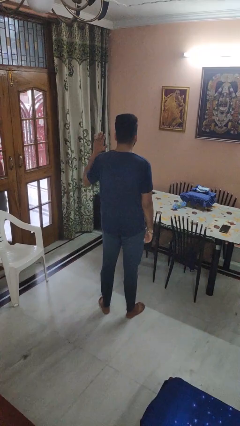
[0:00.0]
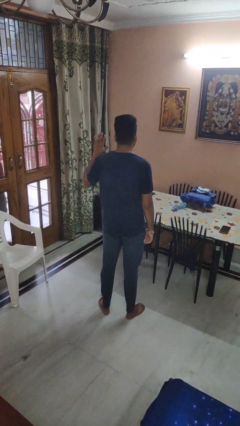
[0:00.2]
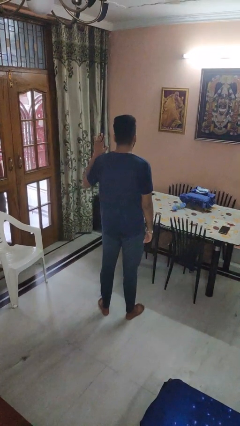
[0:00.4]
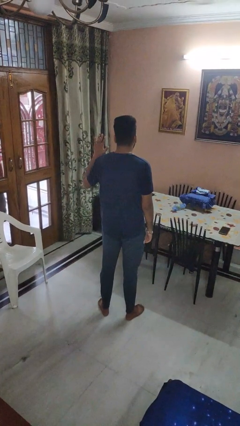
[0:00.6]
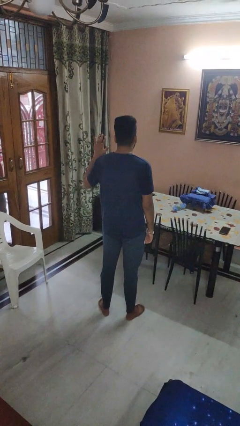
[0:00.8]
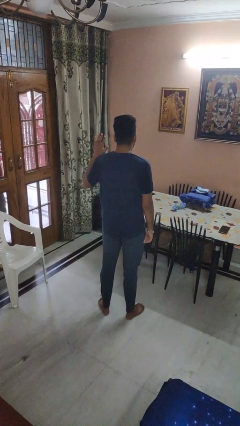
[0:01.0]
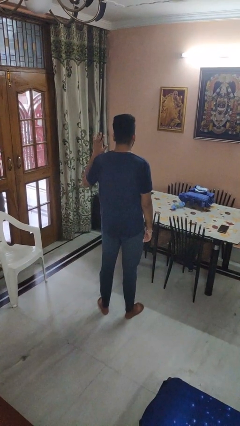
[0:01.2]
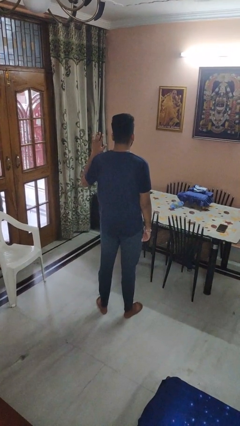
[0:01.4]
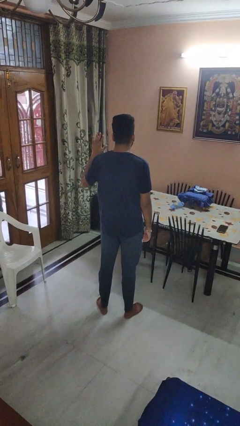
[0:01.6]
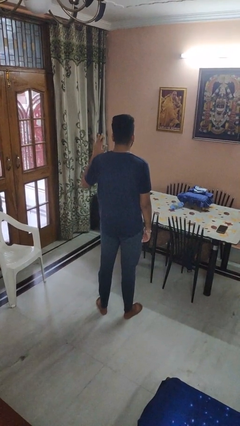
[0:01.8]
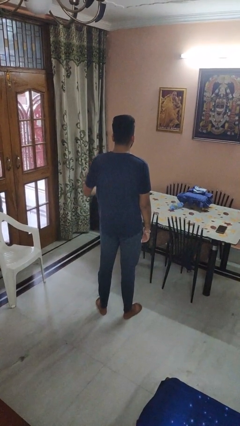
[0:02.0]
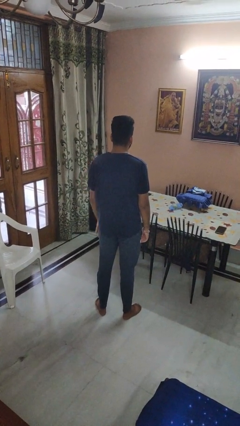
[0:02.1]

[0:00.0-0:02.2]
person gestures number five

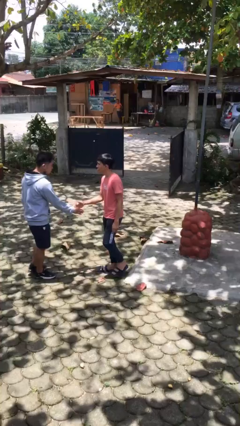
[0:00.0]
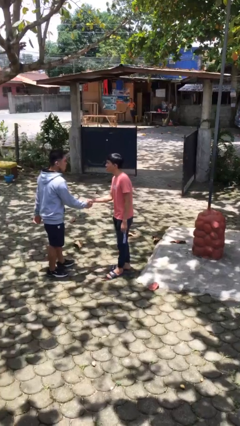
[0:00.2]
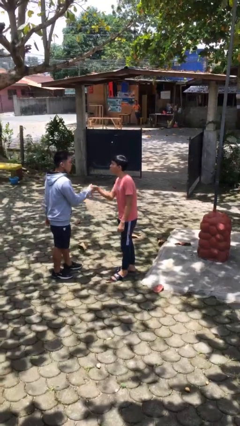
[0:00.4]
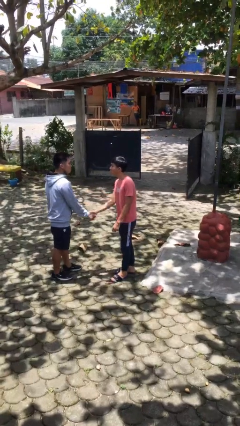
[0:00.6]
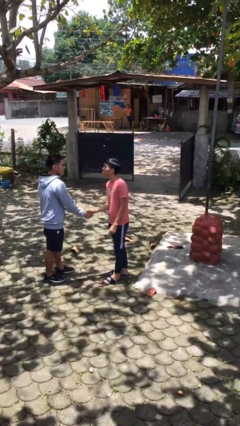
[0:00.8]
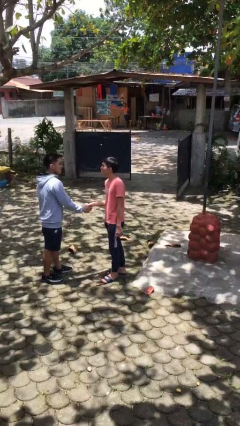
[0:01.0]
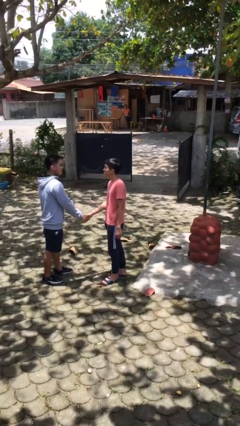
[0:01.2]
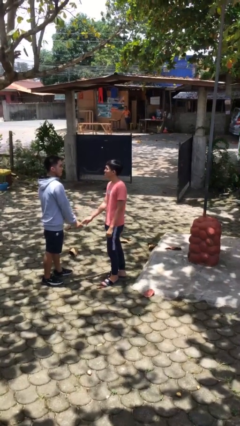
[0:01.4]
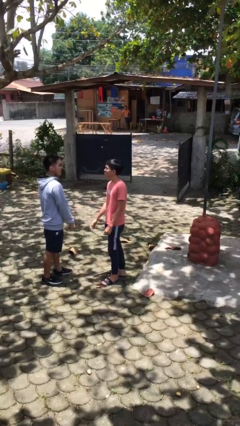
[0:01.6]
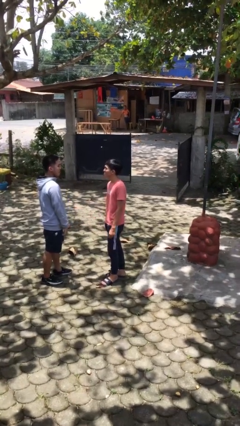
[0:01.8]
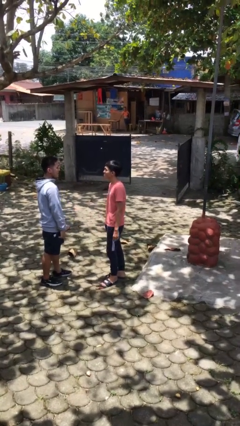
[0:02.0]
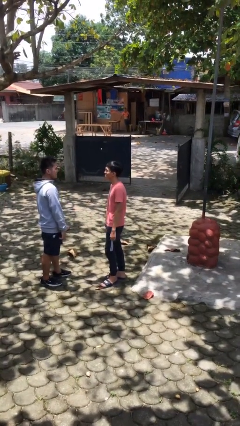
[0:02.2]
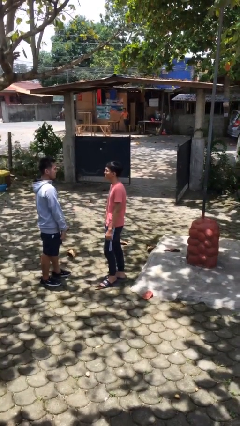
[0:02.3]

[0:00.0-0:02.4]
person shakes hand

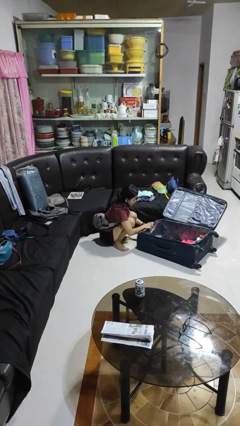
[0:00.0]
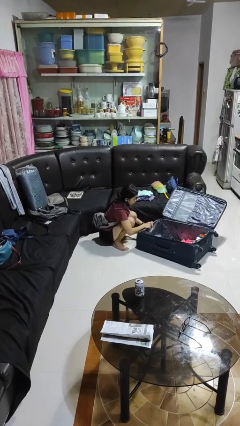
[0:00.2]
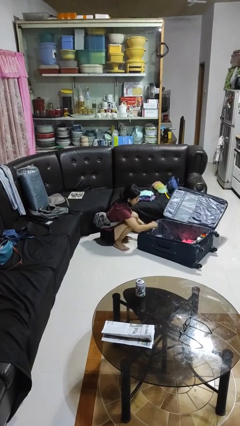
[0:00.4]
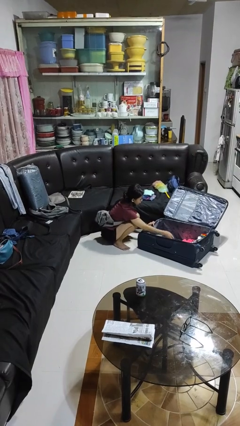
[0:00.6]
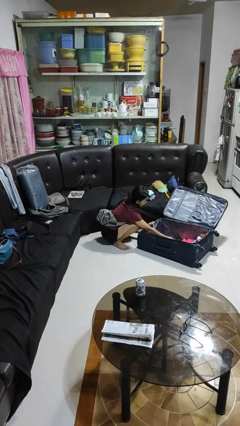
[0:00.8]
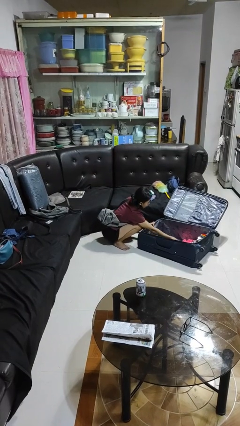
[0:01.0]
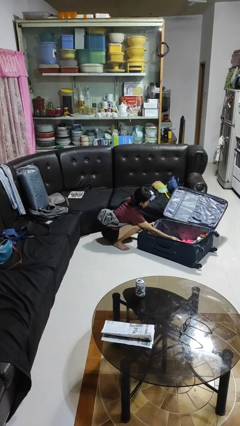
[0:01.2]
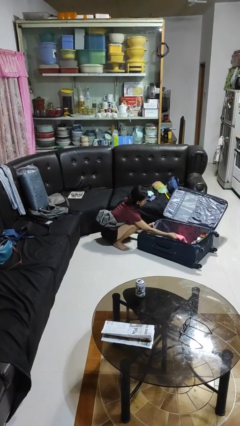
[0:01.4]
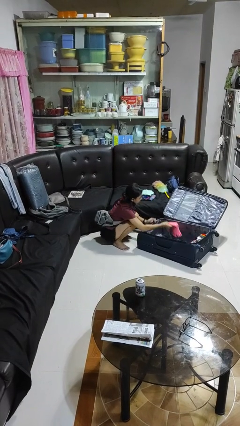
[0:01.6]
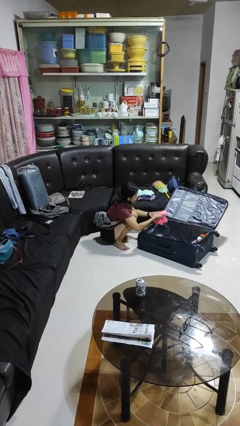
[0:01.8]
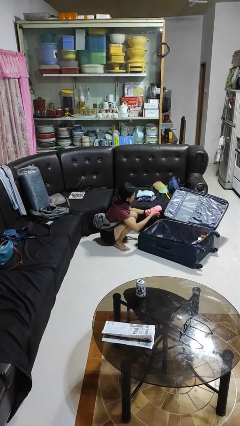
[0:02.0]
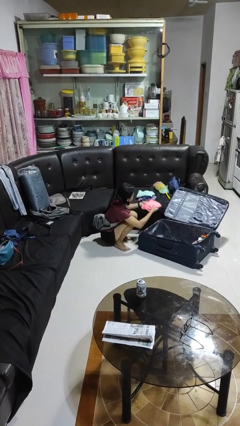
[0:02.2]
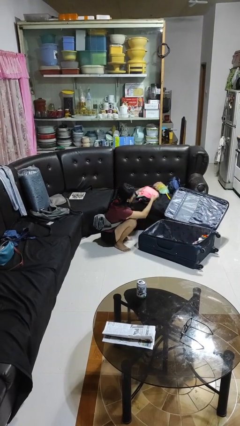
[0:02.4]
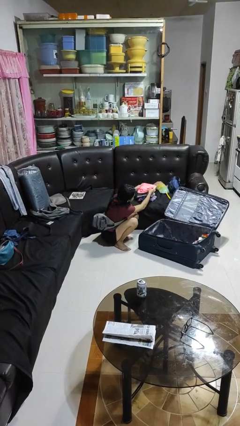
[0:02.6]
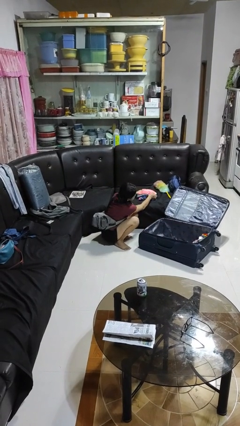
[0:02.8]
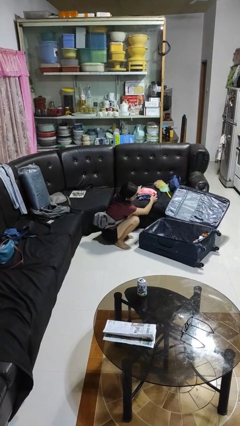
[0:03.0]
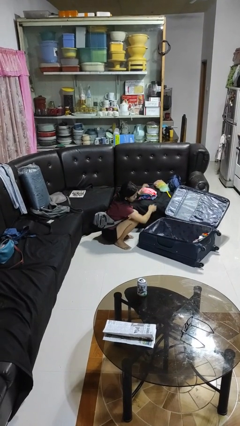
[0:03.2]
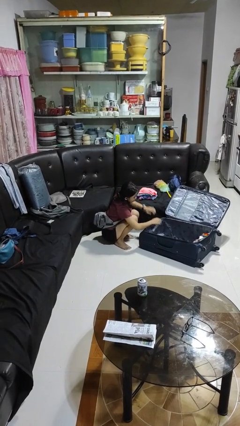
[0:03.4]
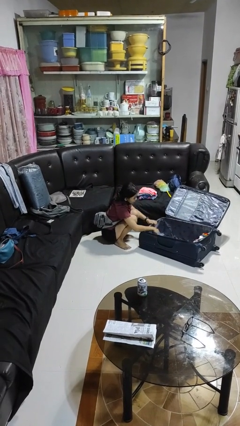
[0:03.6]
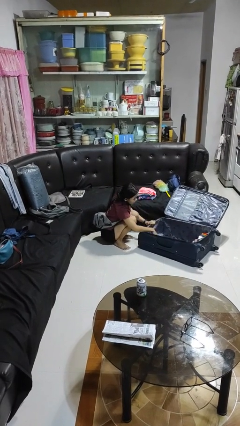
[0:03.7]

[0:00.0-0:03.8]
person unloads clothes from suitcase

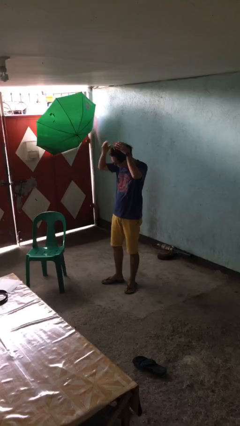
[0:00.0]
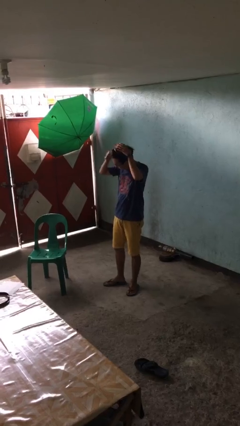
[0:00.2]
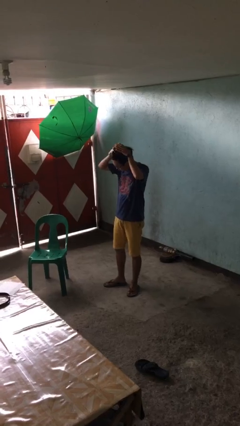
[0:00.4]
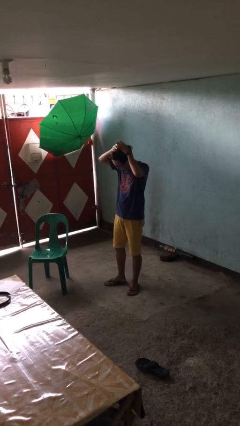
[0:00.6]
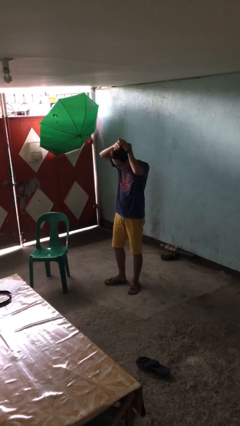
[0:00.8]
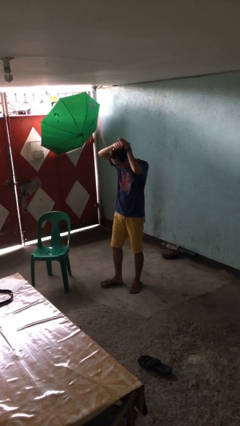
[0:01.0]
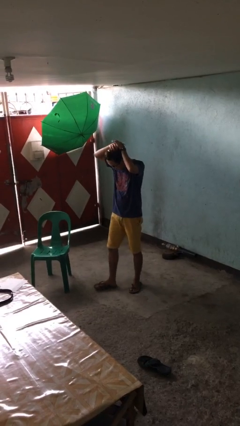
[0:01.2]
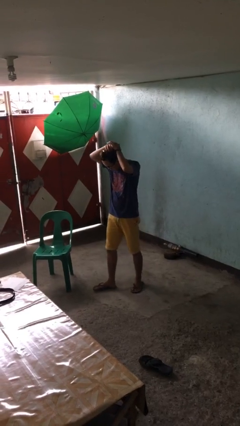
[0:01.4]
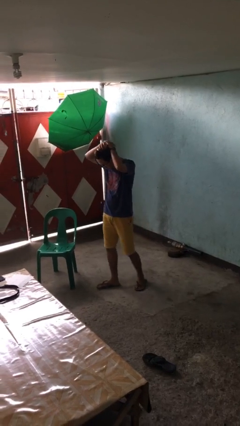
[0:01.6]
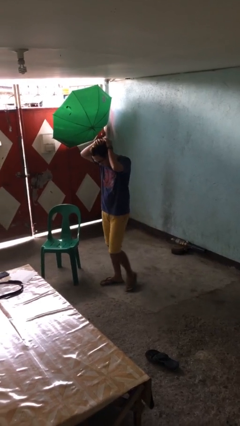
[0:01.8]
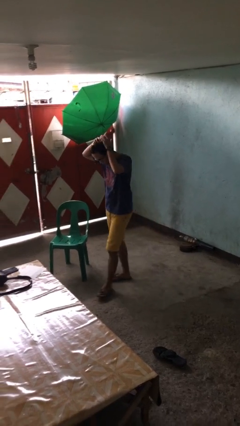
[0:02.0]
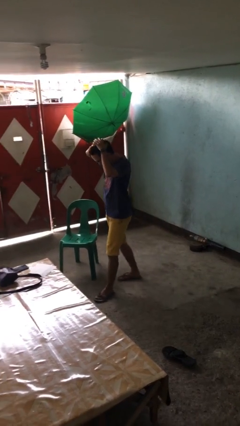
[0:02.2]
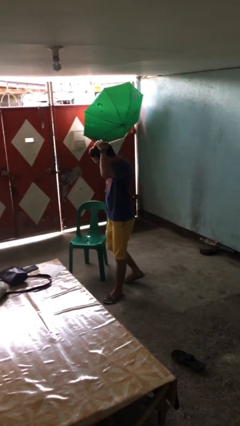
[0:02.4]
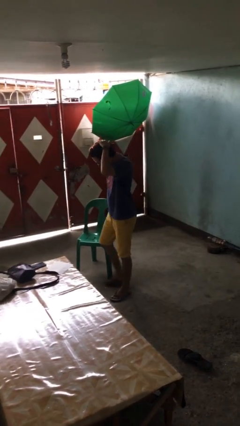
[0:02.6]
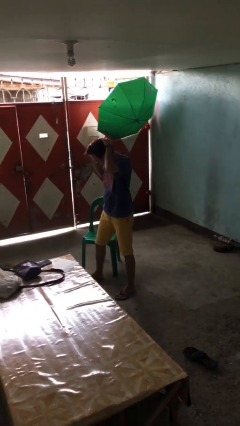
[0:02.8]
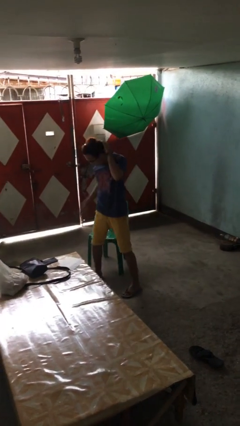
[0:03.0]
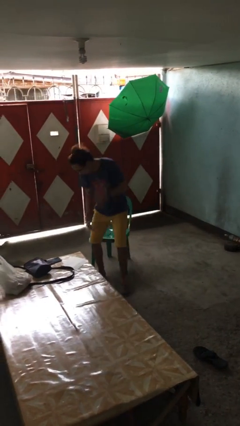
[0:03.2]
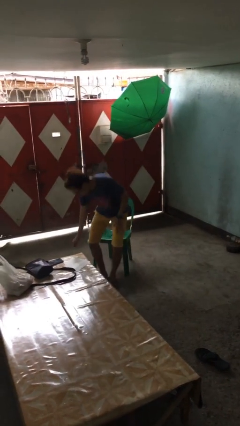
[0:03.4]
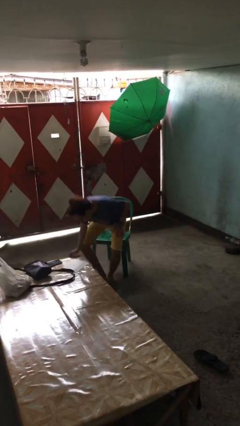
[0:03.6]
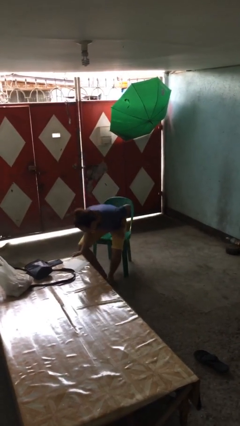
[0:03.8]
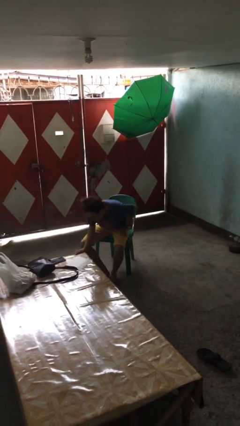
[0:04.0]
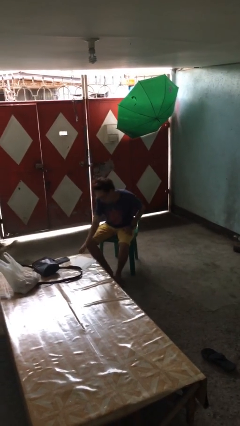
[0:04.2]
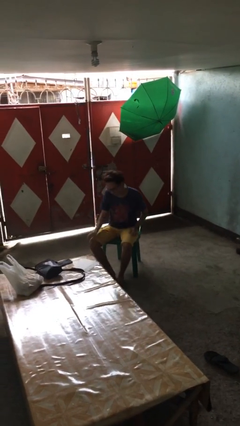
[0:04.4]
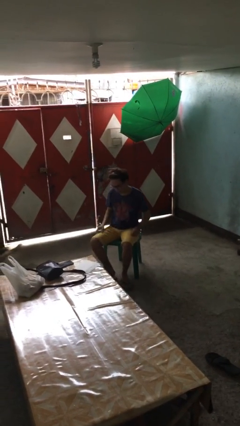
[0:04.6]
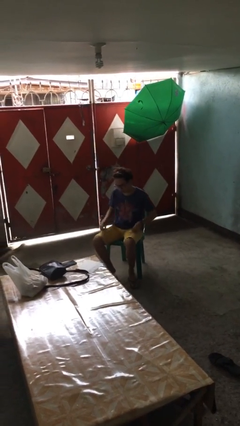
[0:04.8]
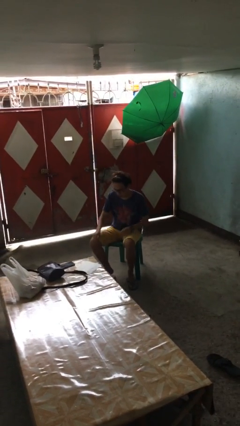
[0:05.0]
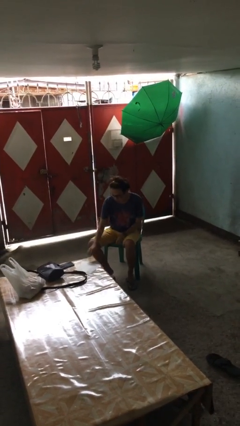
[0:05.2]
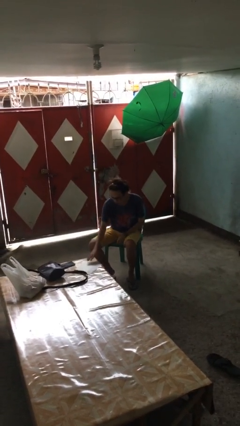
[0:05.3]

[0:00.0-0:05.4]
person sits down

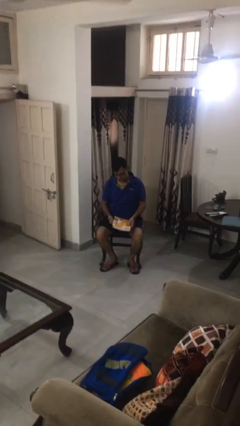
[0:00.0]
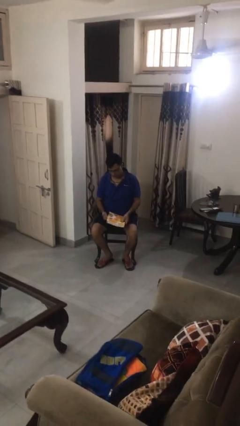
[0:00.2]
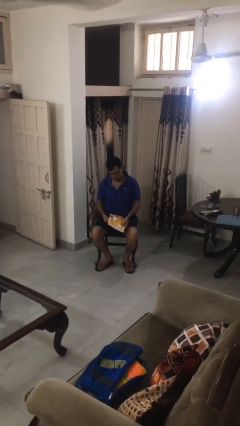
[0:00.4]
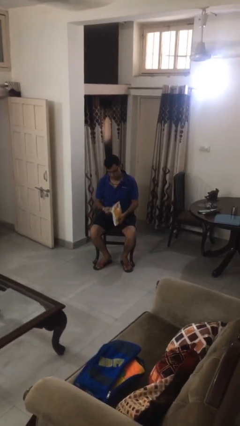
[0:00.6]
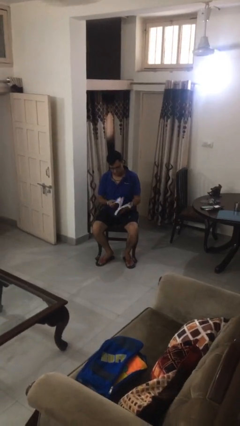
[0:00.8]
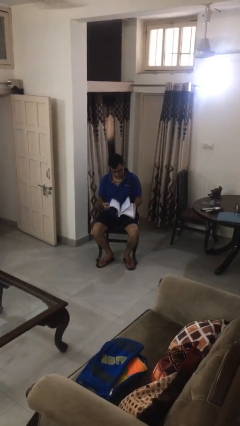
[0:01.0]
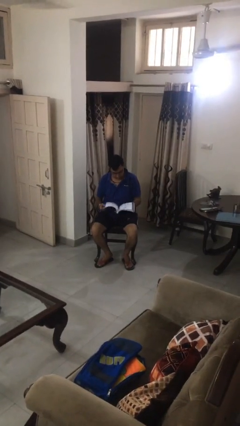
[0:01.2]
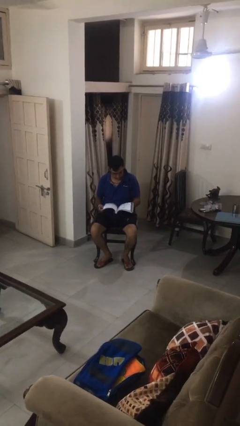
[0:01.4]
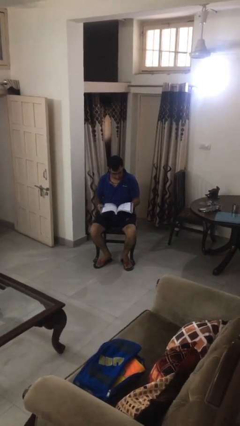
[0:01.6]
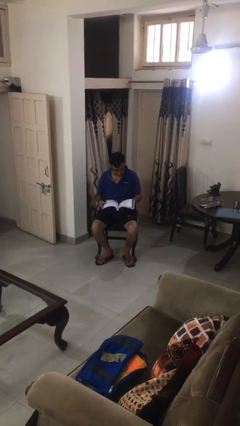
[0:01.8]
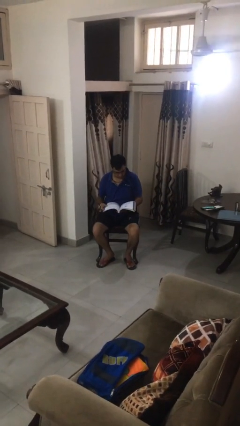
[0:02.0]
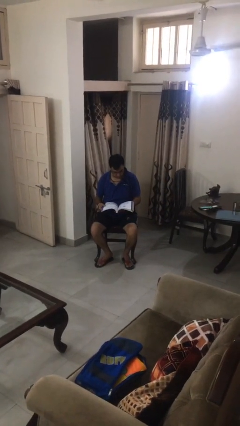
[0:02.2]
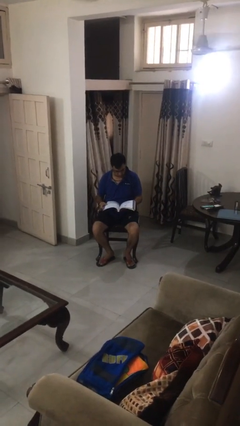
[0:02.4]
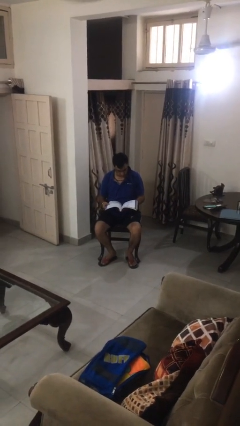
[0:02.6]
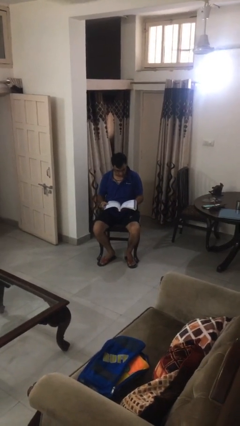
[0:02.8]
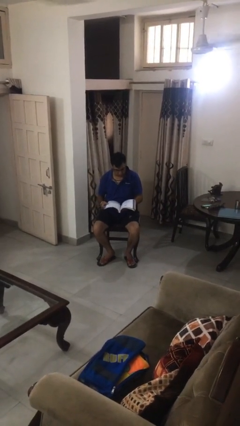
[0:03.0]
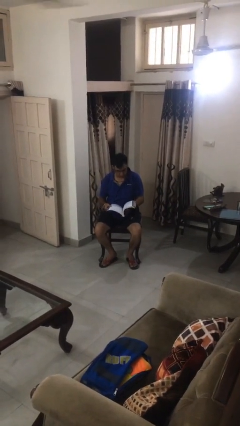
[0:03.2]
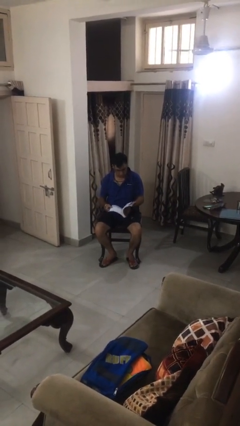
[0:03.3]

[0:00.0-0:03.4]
person reads book
